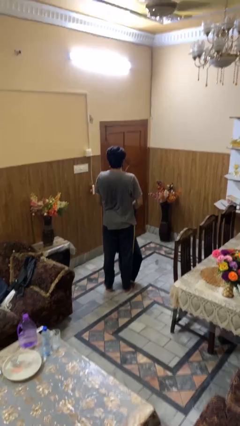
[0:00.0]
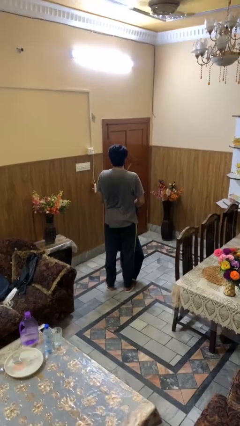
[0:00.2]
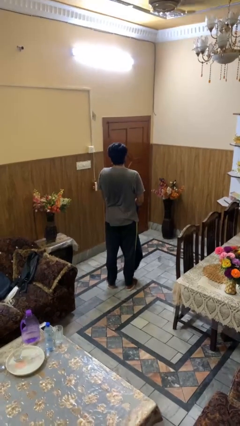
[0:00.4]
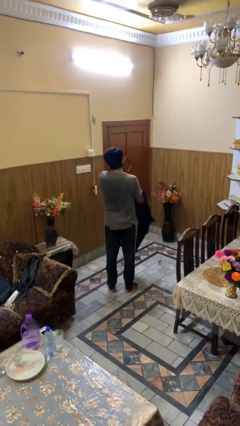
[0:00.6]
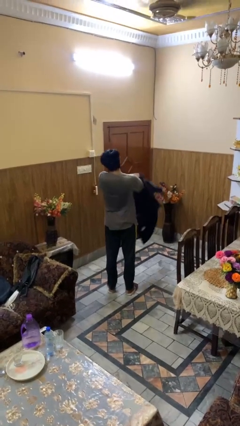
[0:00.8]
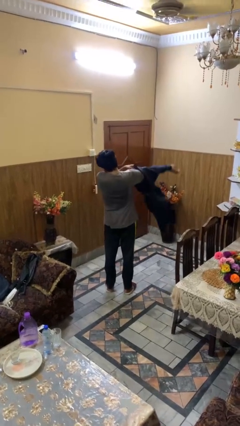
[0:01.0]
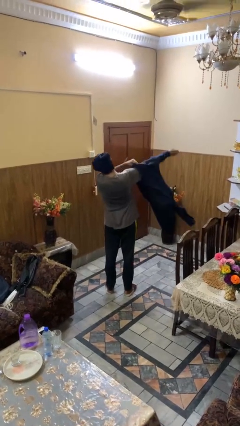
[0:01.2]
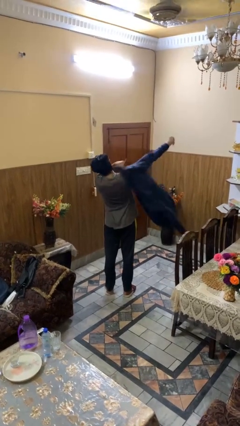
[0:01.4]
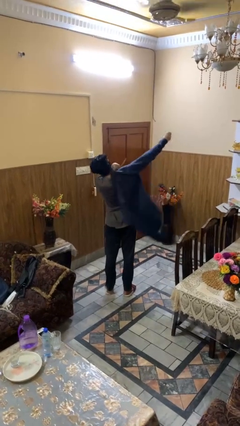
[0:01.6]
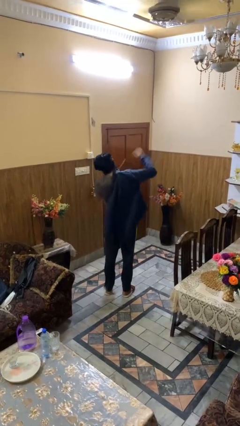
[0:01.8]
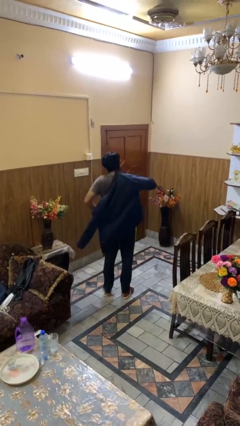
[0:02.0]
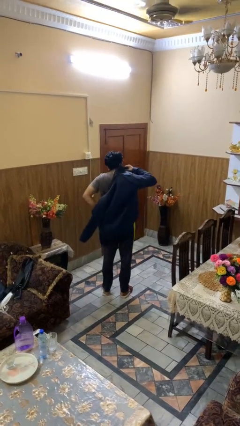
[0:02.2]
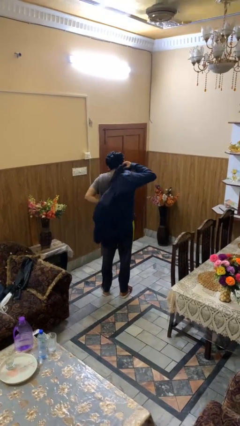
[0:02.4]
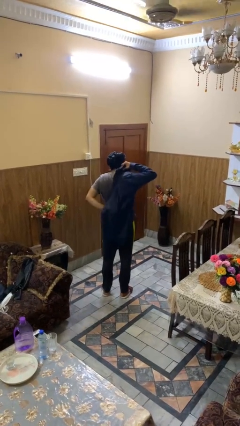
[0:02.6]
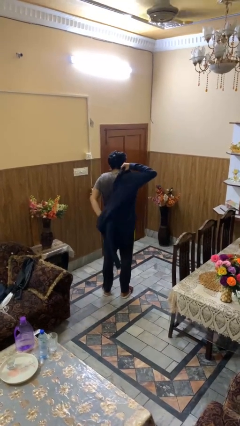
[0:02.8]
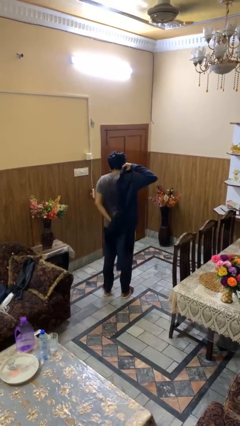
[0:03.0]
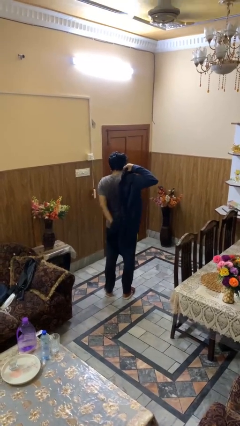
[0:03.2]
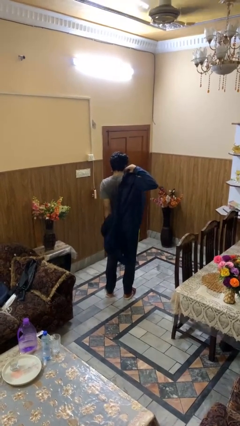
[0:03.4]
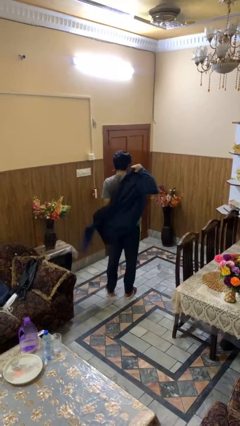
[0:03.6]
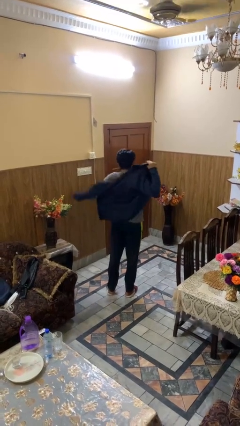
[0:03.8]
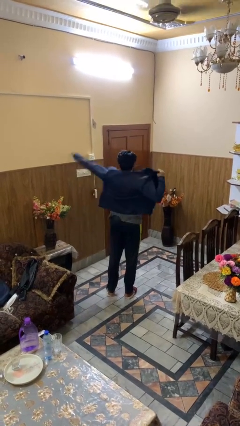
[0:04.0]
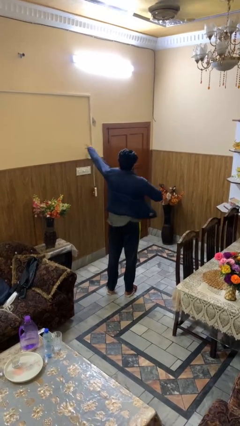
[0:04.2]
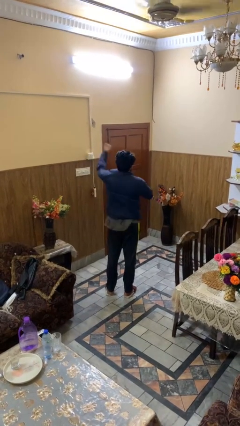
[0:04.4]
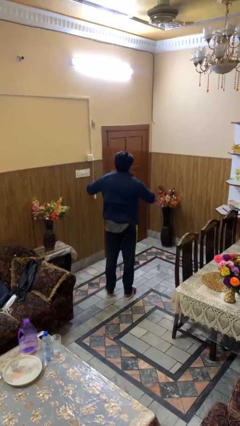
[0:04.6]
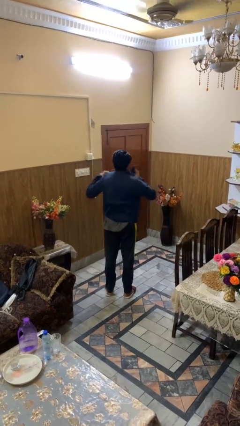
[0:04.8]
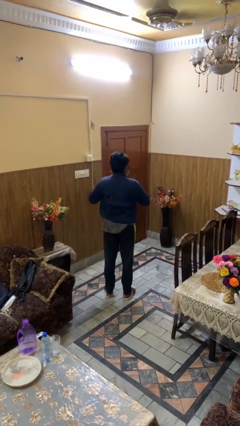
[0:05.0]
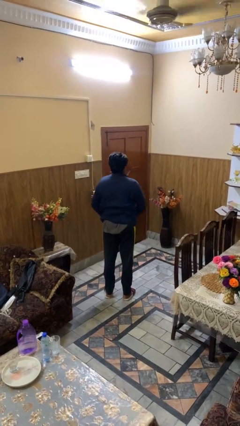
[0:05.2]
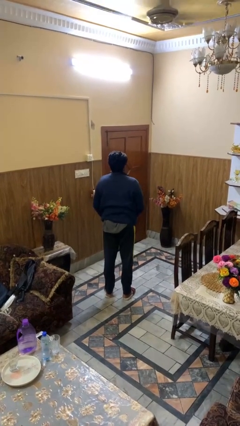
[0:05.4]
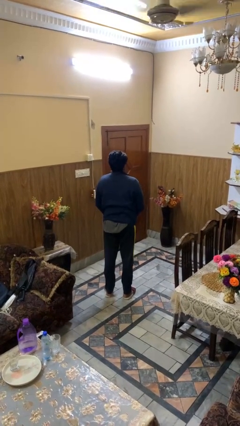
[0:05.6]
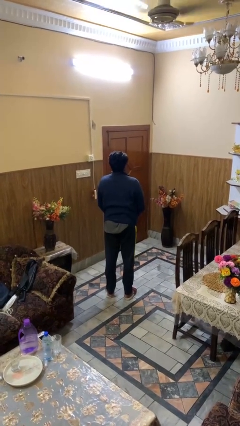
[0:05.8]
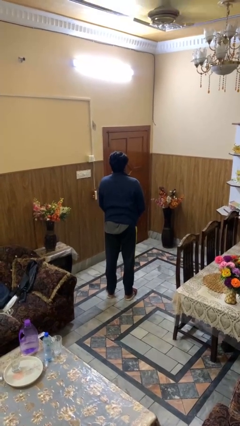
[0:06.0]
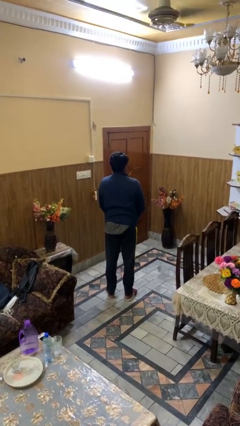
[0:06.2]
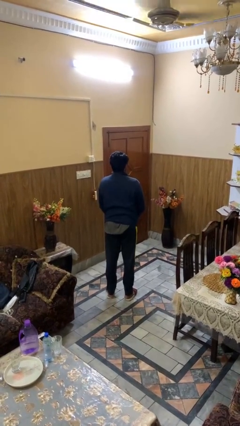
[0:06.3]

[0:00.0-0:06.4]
person puts on jacket

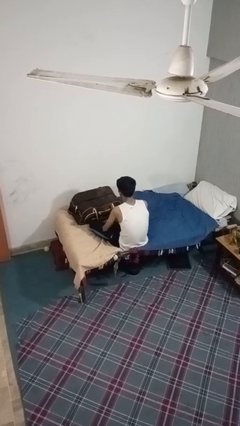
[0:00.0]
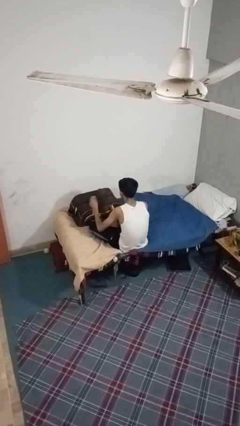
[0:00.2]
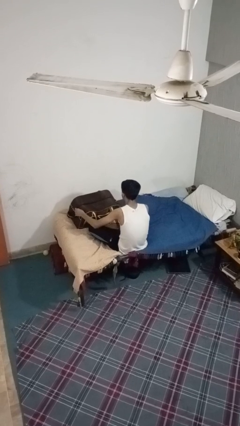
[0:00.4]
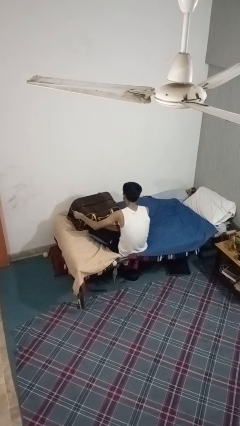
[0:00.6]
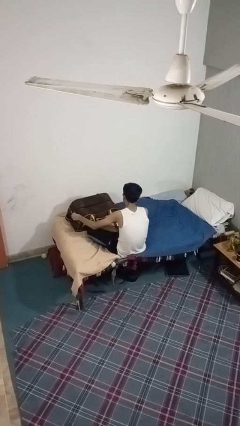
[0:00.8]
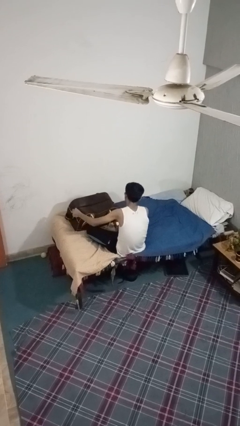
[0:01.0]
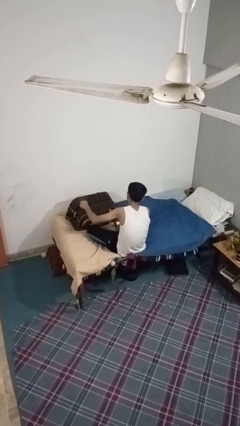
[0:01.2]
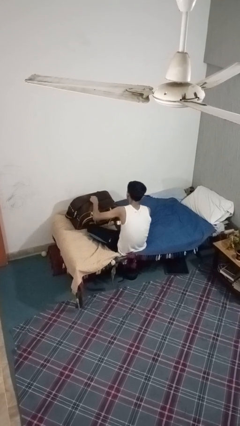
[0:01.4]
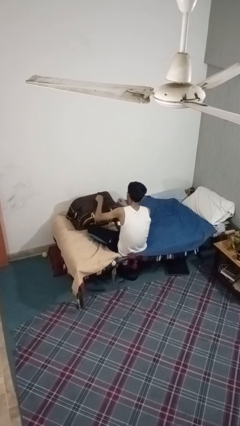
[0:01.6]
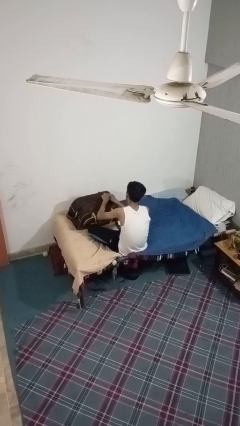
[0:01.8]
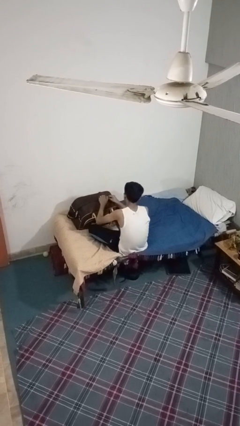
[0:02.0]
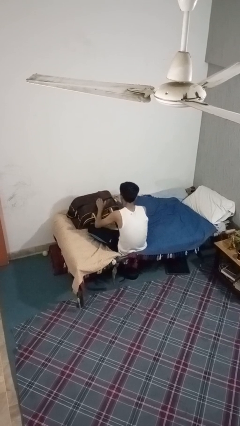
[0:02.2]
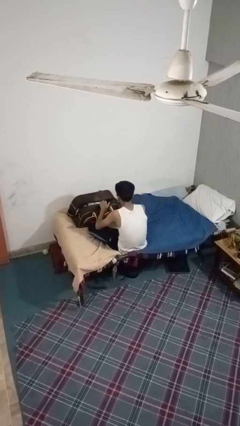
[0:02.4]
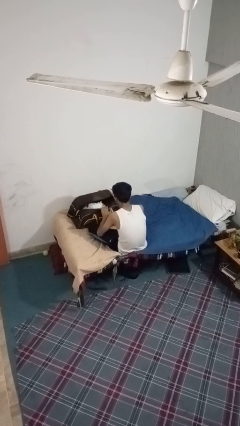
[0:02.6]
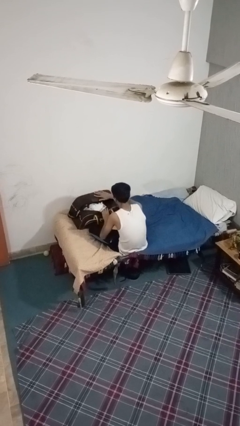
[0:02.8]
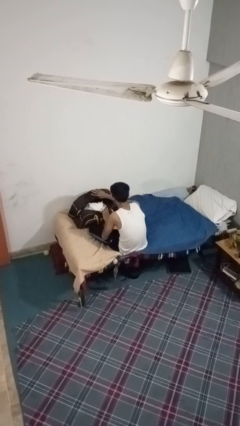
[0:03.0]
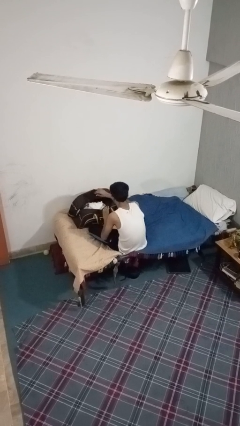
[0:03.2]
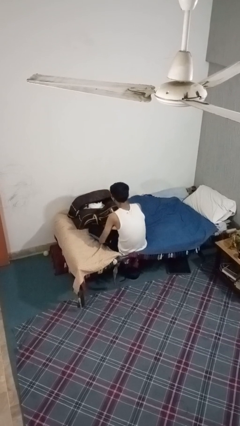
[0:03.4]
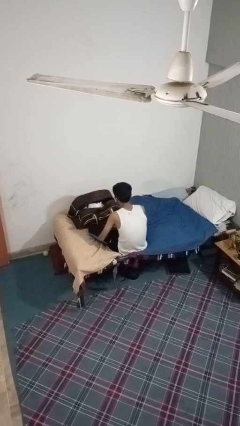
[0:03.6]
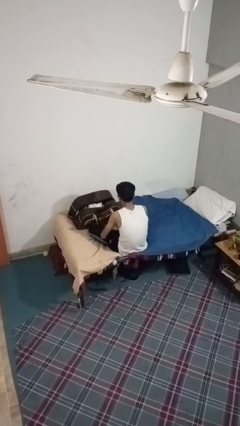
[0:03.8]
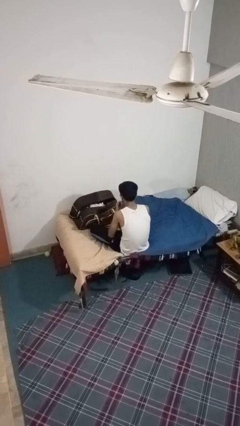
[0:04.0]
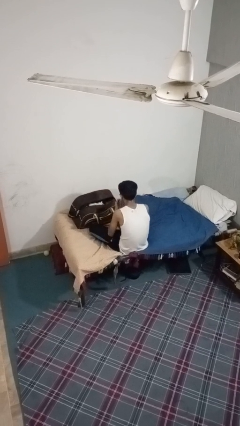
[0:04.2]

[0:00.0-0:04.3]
person opens suitcase

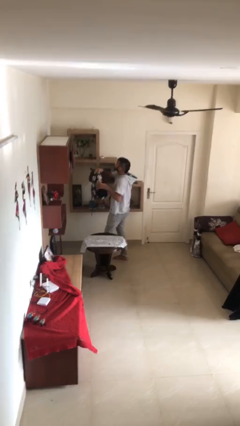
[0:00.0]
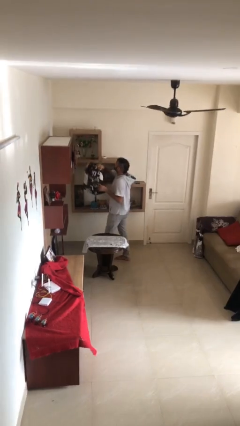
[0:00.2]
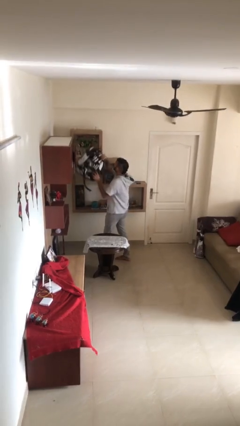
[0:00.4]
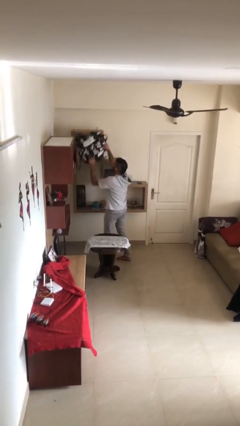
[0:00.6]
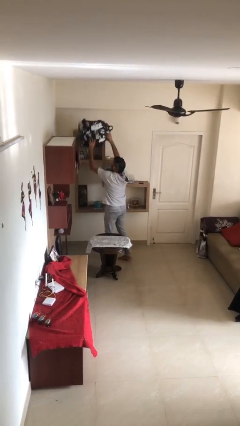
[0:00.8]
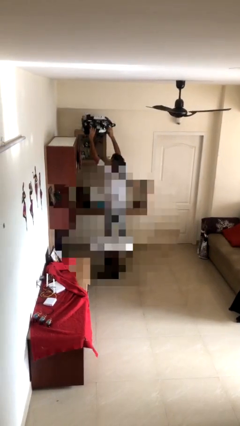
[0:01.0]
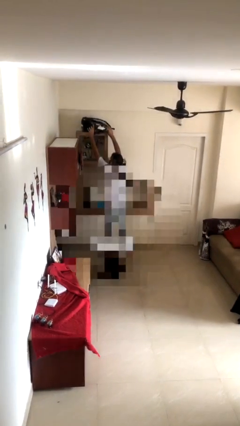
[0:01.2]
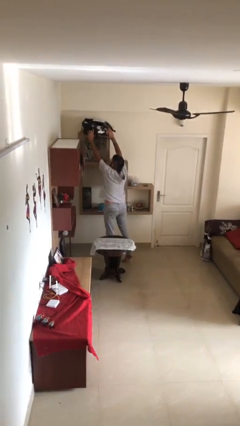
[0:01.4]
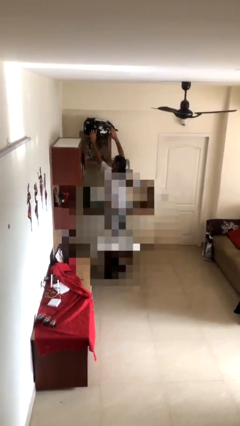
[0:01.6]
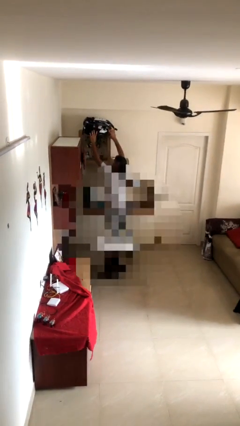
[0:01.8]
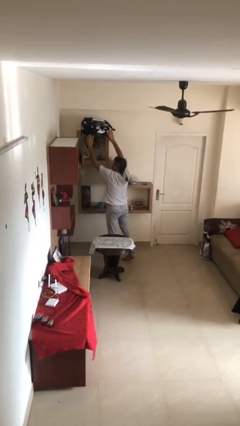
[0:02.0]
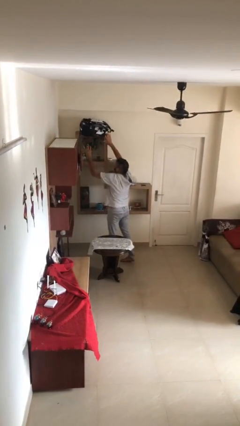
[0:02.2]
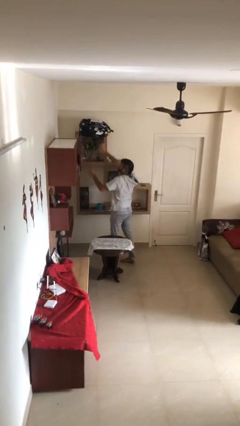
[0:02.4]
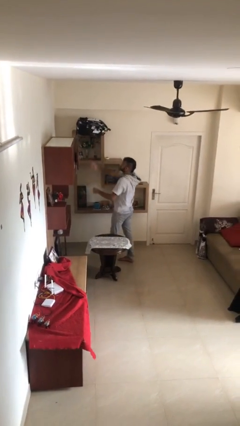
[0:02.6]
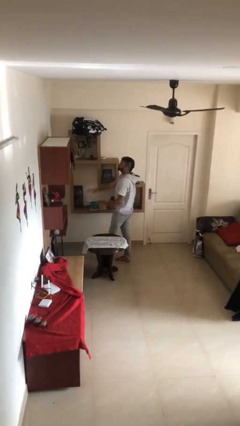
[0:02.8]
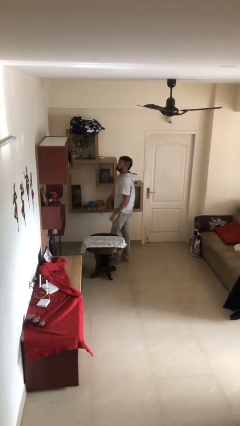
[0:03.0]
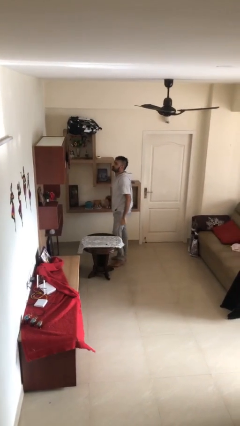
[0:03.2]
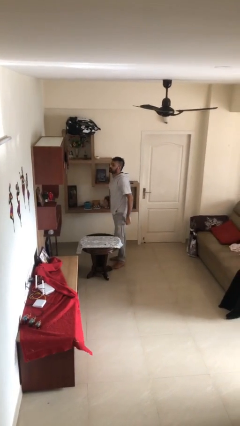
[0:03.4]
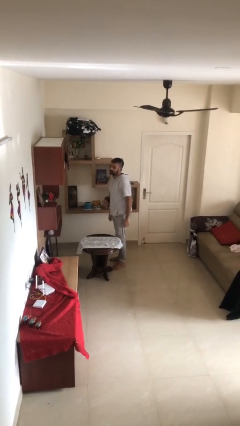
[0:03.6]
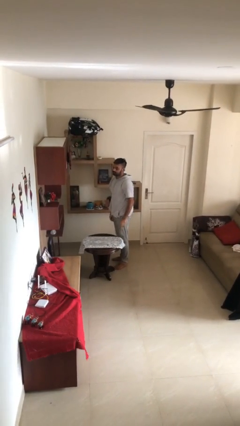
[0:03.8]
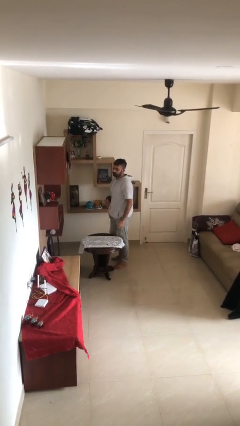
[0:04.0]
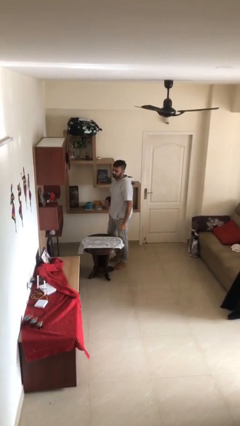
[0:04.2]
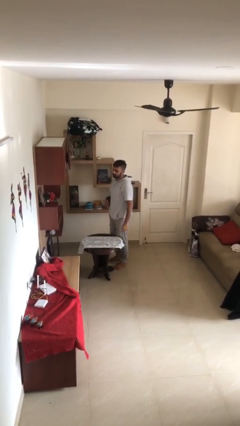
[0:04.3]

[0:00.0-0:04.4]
person puts down object on shelf

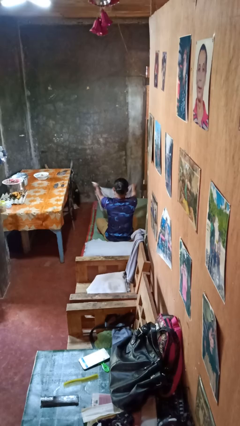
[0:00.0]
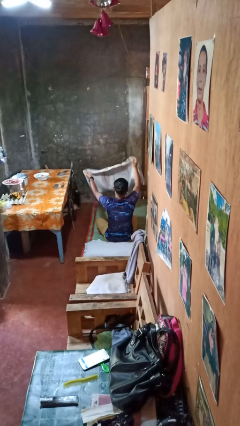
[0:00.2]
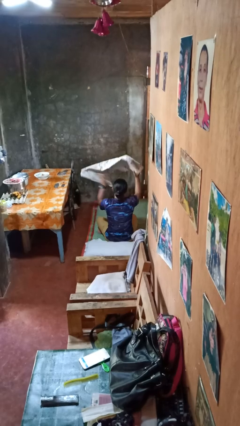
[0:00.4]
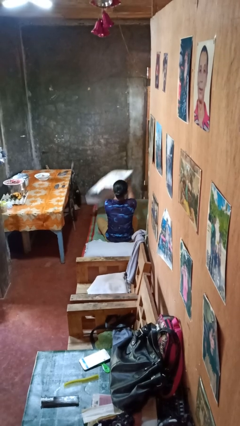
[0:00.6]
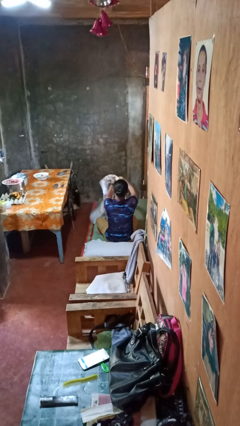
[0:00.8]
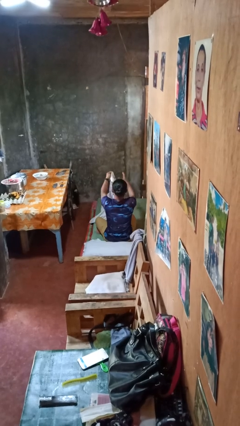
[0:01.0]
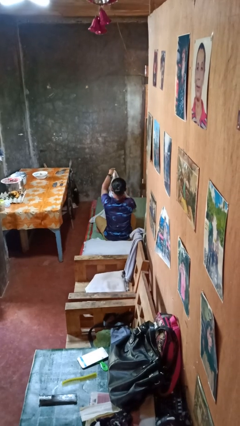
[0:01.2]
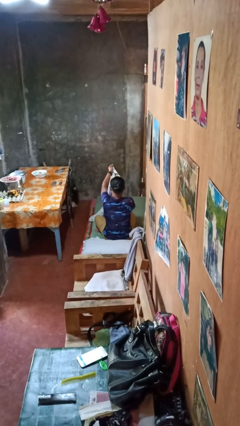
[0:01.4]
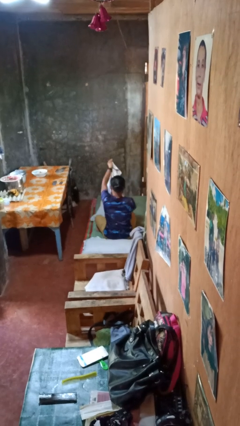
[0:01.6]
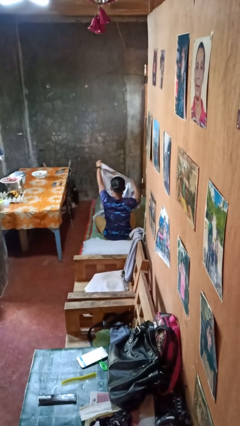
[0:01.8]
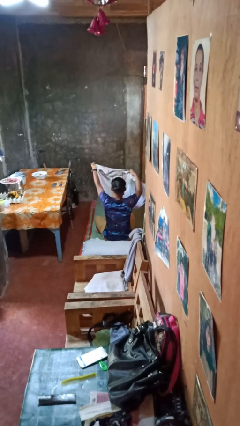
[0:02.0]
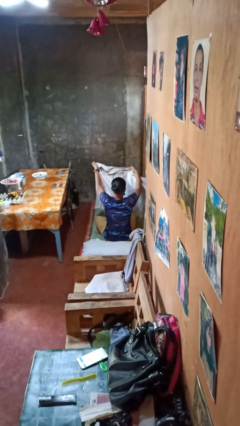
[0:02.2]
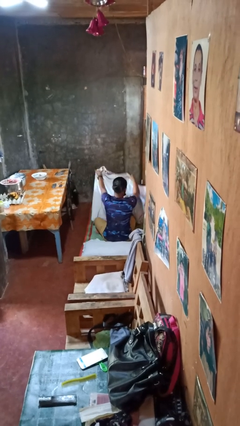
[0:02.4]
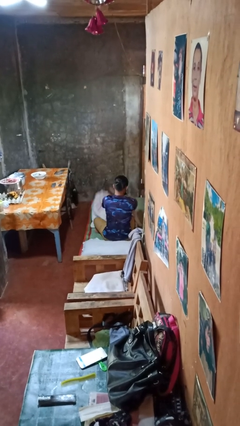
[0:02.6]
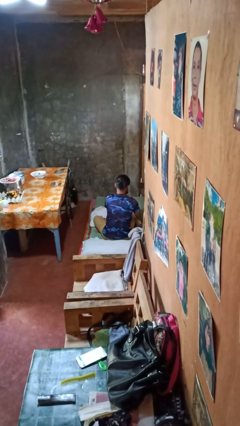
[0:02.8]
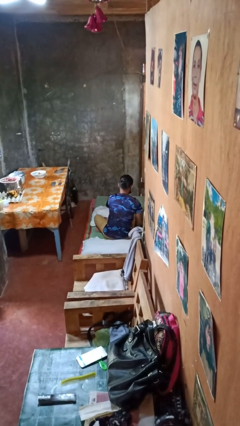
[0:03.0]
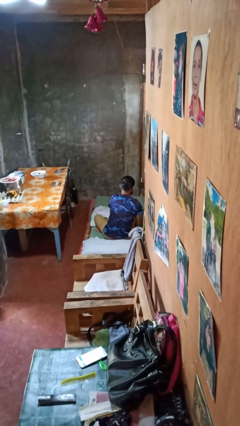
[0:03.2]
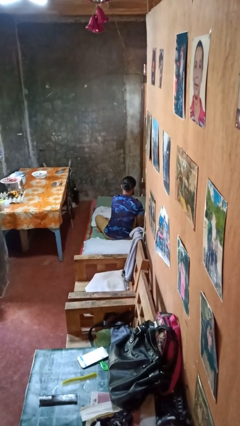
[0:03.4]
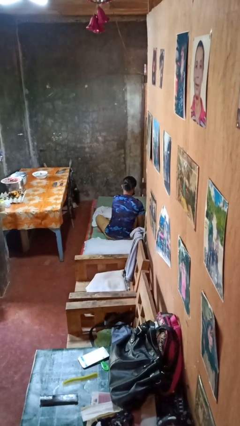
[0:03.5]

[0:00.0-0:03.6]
person unfolds blanket
